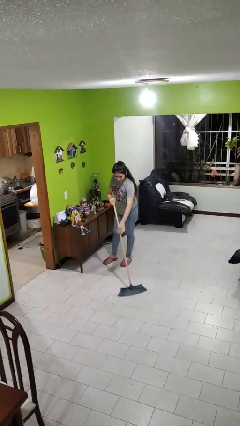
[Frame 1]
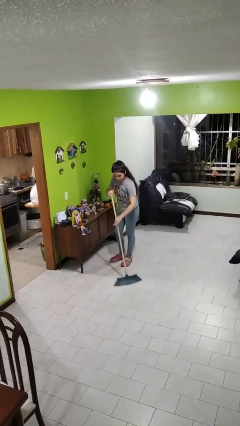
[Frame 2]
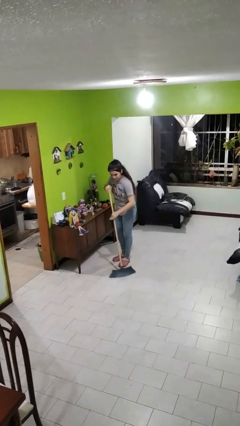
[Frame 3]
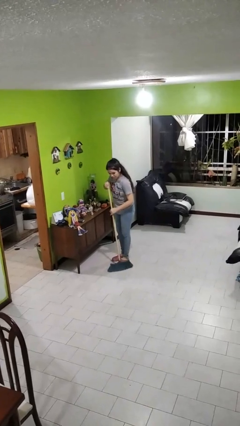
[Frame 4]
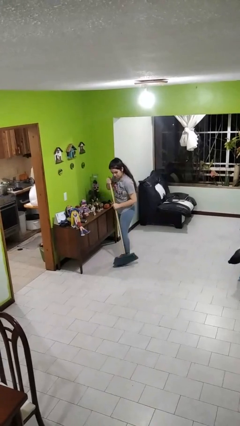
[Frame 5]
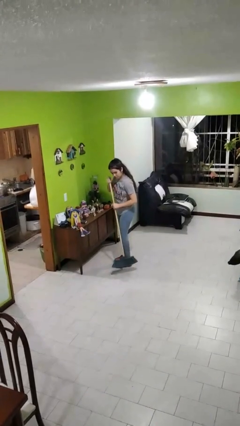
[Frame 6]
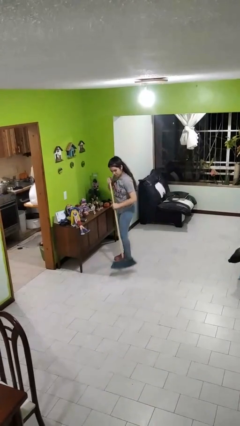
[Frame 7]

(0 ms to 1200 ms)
person sweeps floor

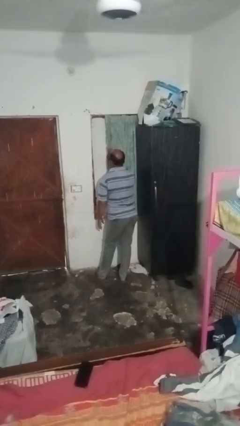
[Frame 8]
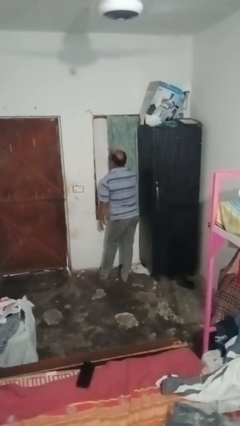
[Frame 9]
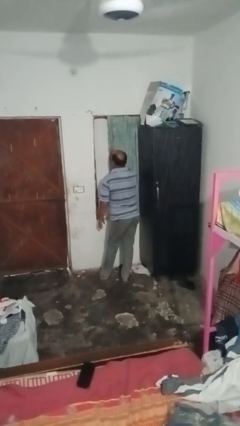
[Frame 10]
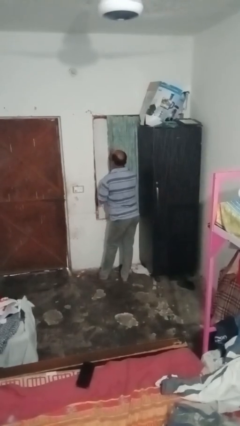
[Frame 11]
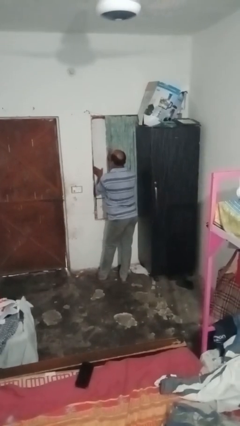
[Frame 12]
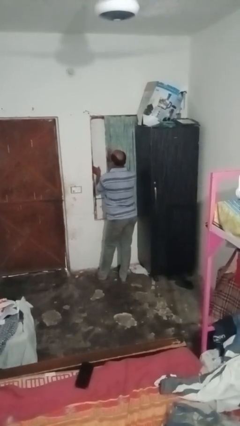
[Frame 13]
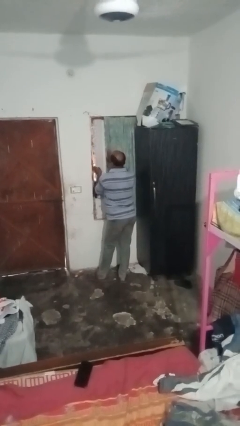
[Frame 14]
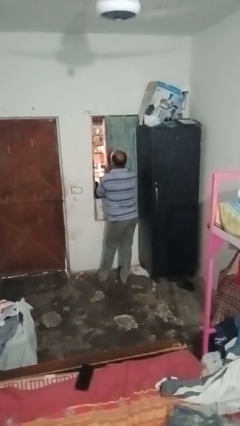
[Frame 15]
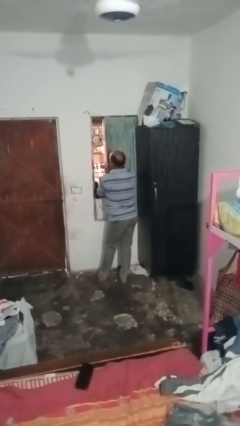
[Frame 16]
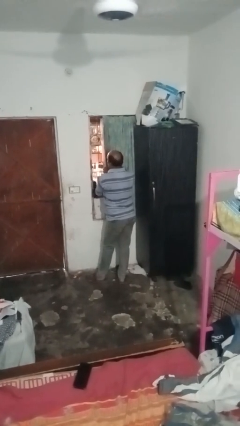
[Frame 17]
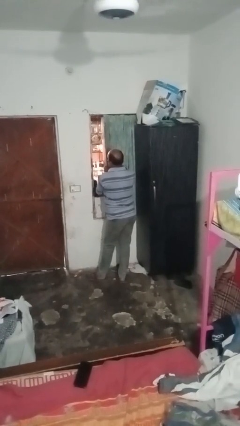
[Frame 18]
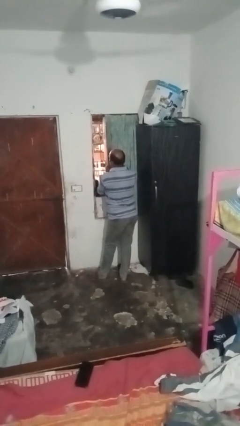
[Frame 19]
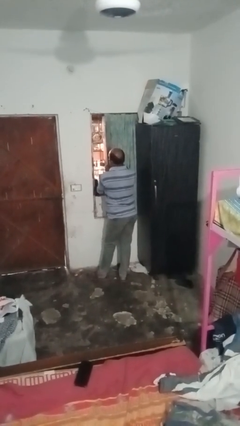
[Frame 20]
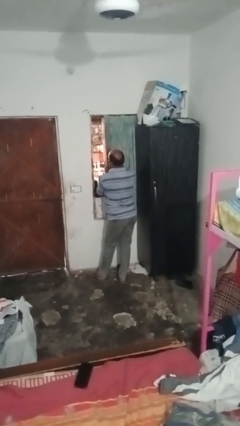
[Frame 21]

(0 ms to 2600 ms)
person opens home window

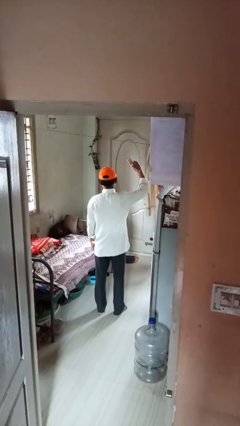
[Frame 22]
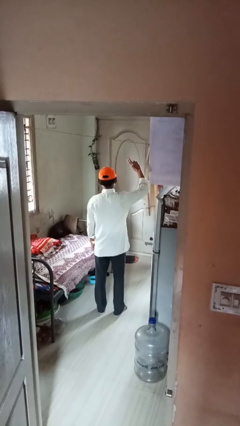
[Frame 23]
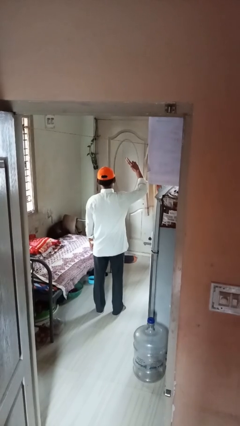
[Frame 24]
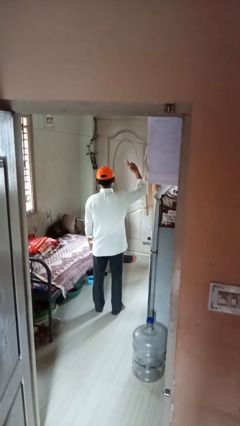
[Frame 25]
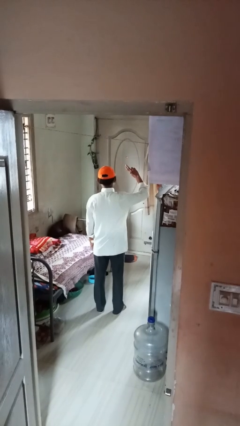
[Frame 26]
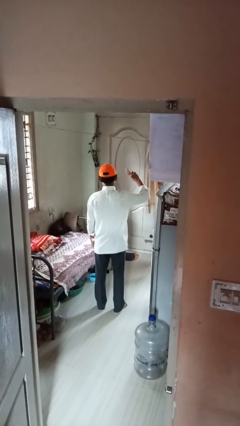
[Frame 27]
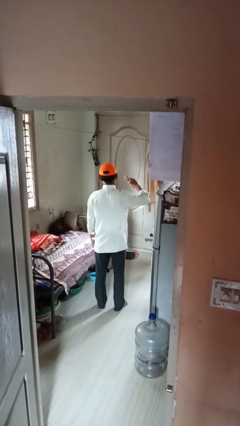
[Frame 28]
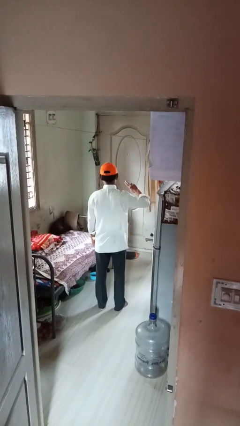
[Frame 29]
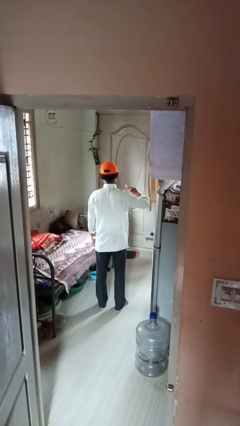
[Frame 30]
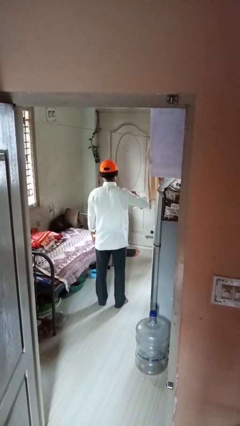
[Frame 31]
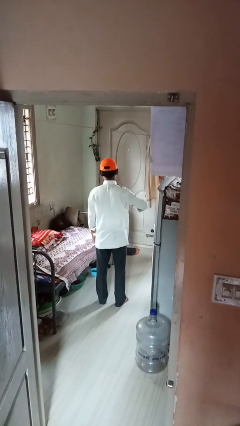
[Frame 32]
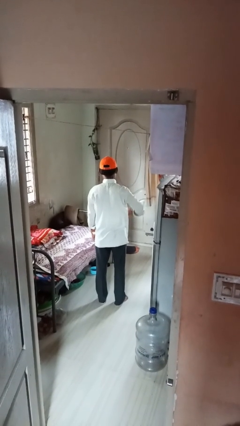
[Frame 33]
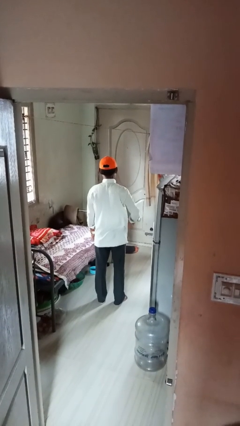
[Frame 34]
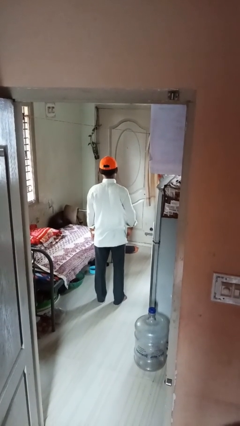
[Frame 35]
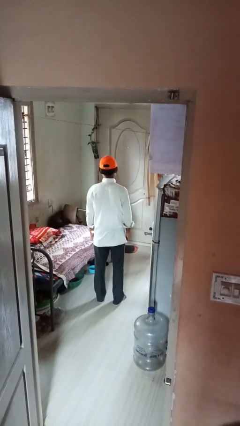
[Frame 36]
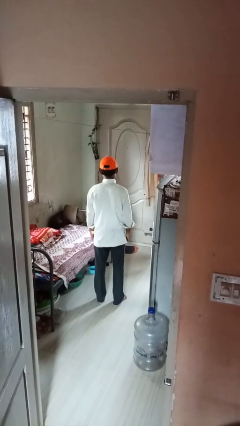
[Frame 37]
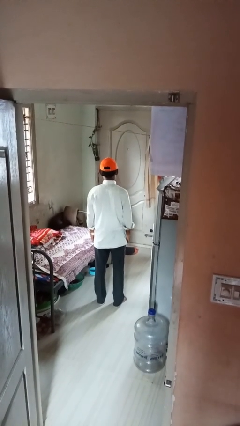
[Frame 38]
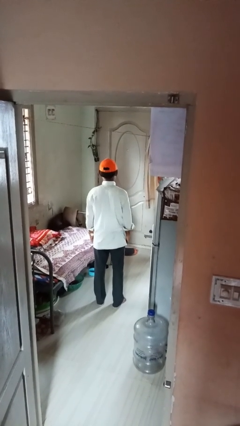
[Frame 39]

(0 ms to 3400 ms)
person gestures swipe down

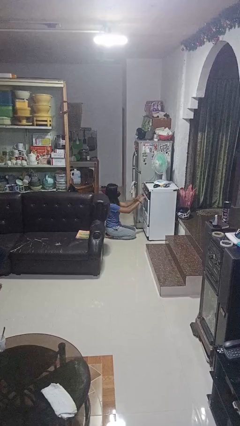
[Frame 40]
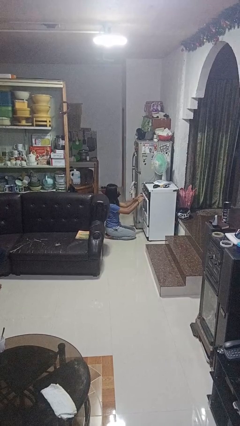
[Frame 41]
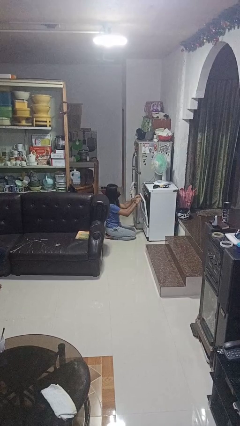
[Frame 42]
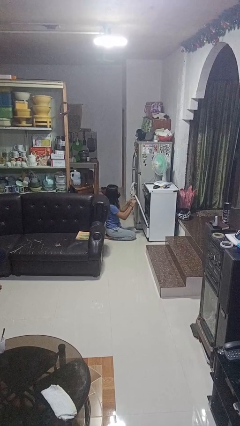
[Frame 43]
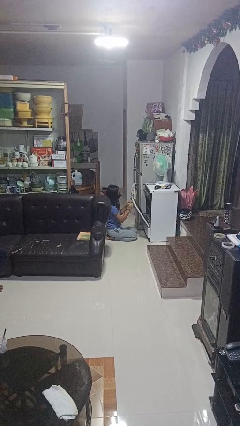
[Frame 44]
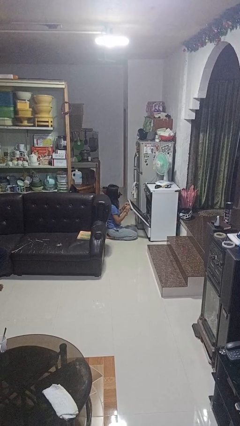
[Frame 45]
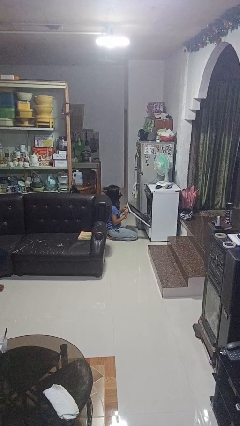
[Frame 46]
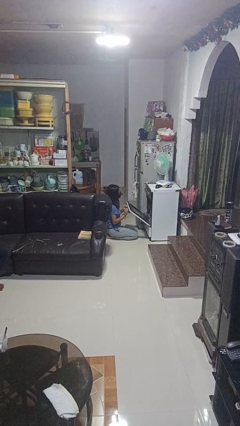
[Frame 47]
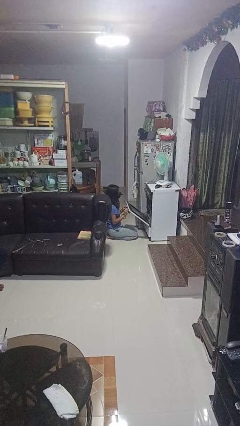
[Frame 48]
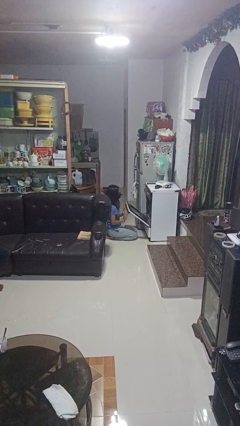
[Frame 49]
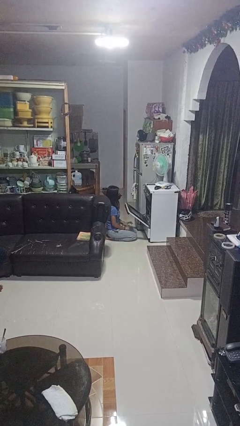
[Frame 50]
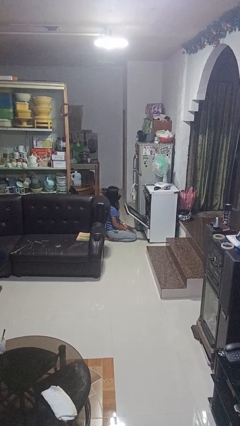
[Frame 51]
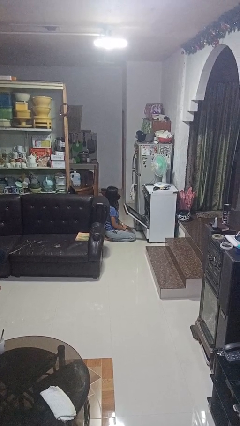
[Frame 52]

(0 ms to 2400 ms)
person opens oven door

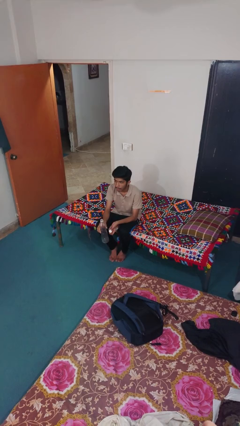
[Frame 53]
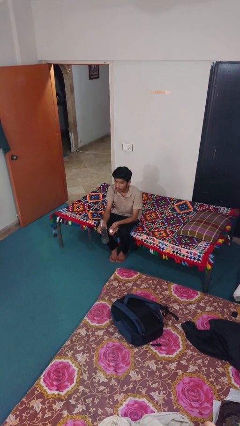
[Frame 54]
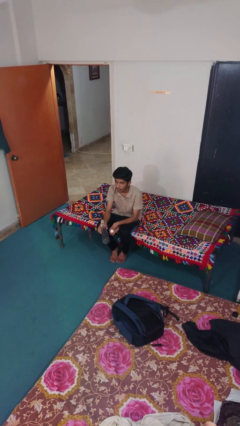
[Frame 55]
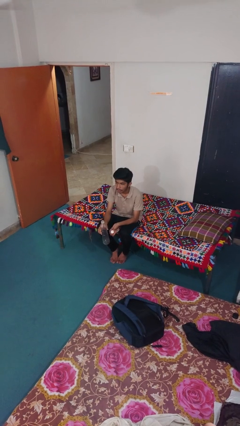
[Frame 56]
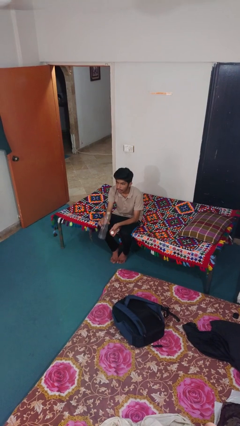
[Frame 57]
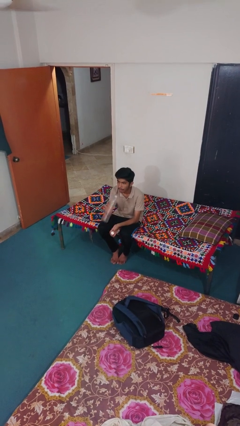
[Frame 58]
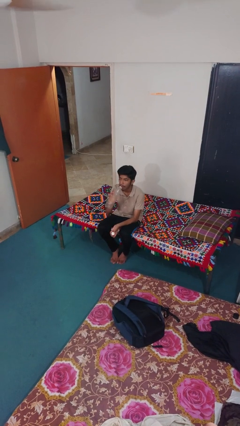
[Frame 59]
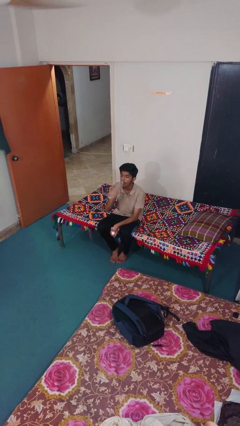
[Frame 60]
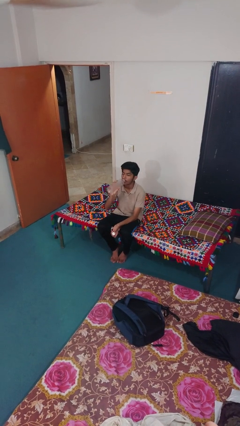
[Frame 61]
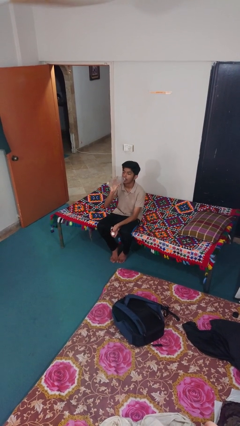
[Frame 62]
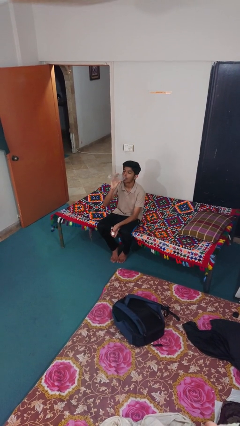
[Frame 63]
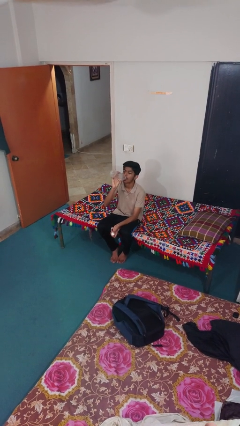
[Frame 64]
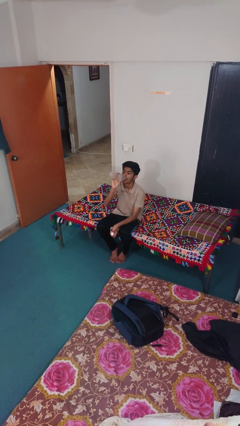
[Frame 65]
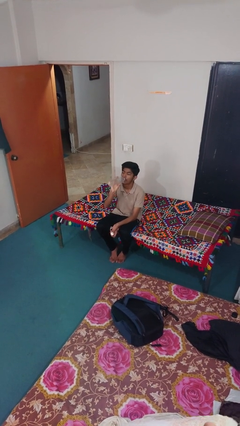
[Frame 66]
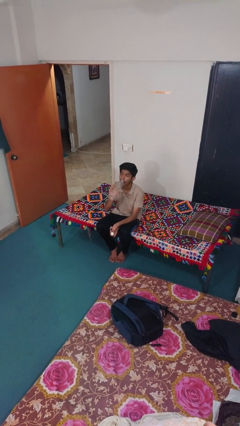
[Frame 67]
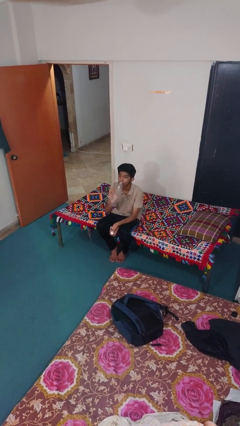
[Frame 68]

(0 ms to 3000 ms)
person drinks from bottle

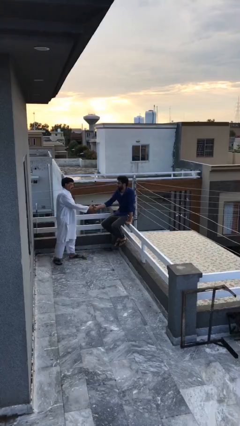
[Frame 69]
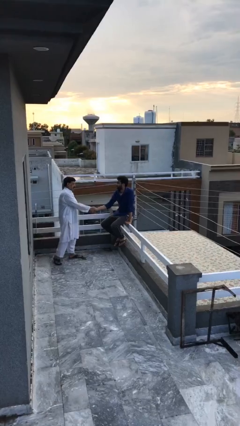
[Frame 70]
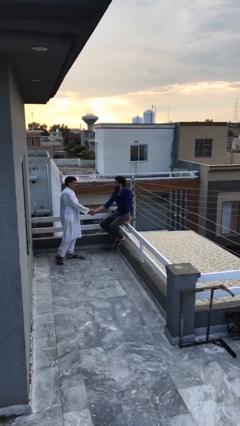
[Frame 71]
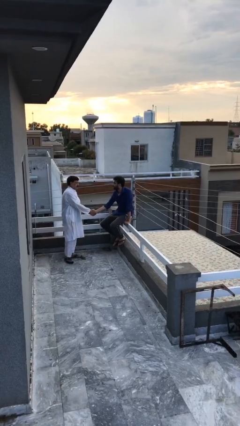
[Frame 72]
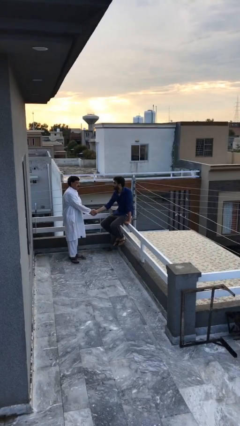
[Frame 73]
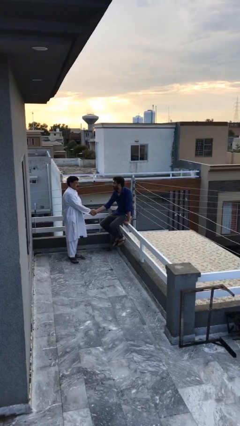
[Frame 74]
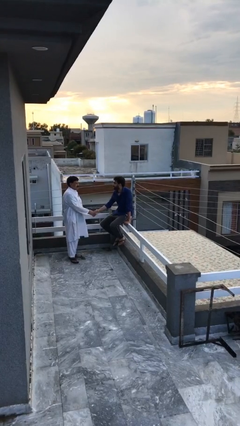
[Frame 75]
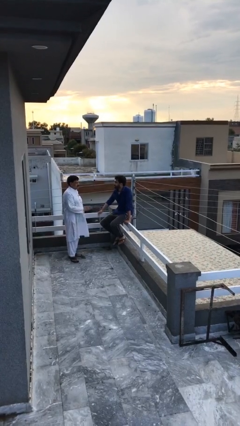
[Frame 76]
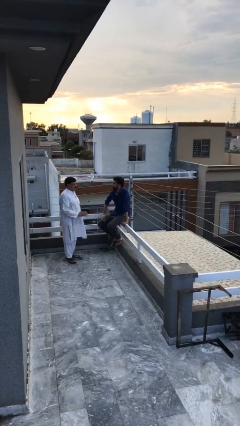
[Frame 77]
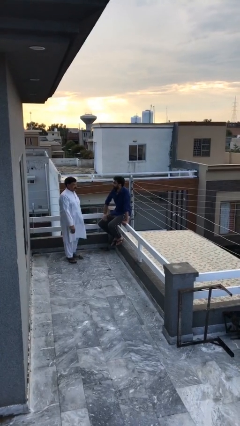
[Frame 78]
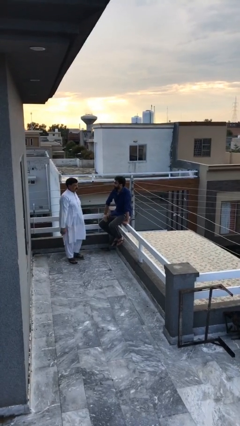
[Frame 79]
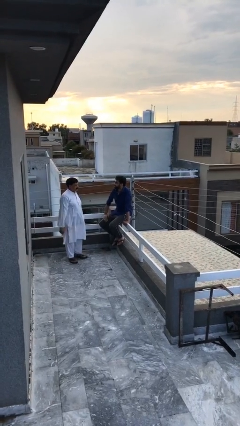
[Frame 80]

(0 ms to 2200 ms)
person shakes hand

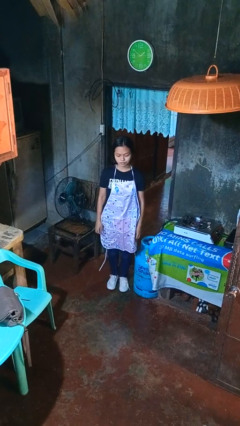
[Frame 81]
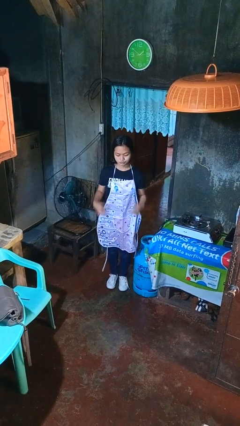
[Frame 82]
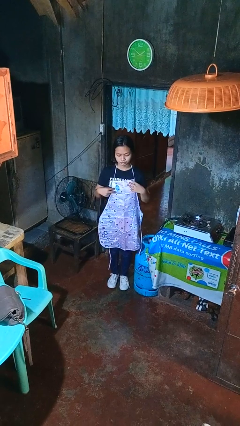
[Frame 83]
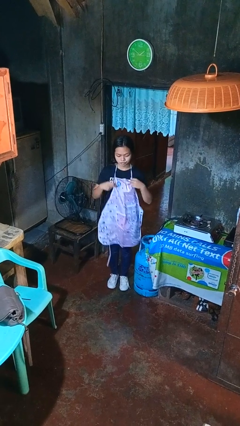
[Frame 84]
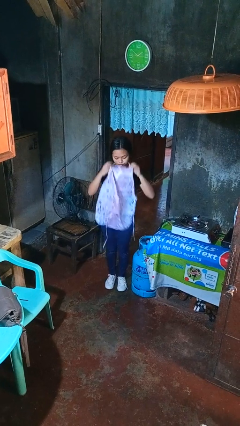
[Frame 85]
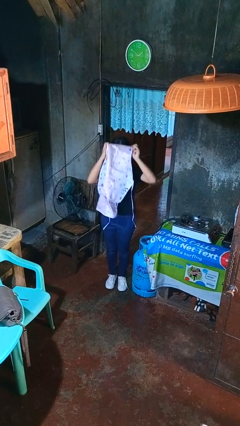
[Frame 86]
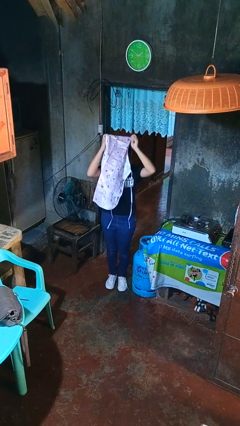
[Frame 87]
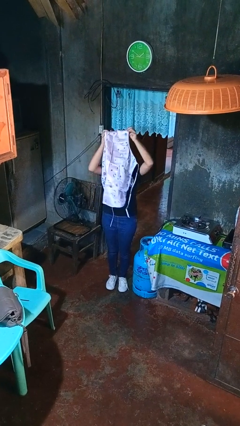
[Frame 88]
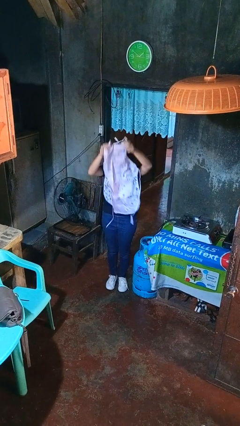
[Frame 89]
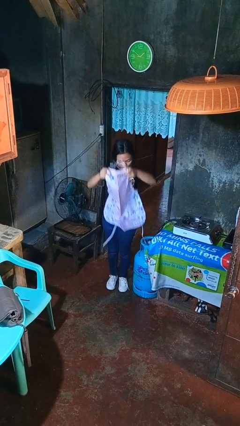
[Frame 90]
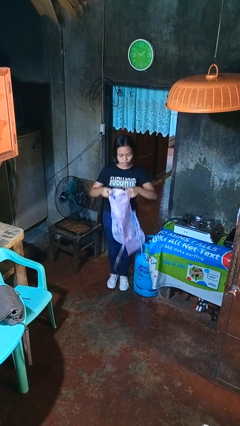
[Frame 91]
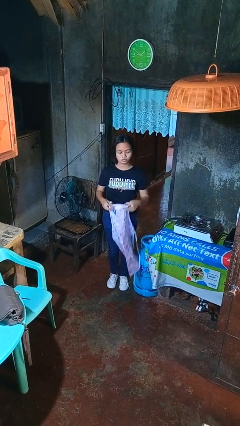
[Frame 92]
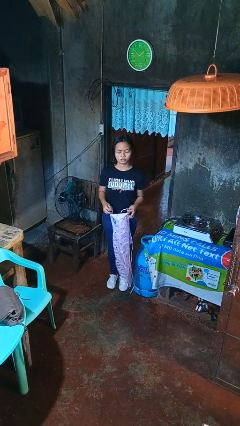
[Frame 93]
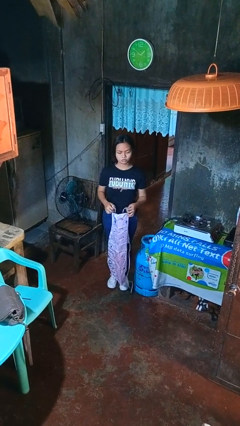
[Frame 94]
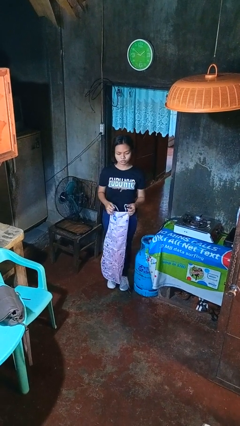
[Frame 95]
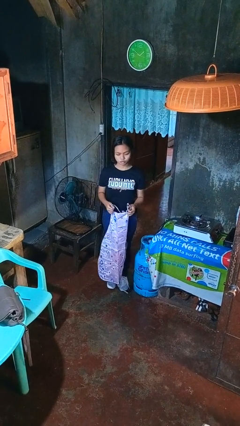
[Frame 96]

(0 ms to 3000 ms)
person takes off apron
